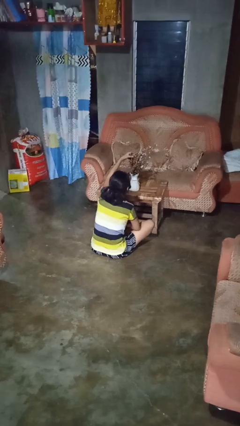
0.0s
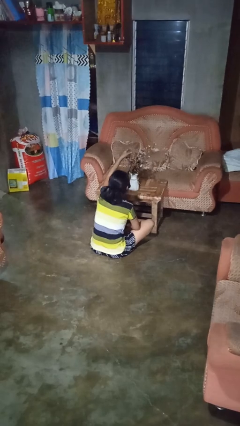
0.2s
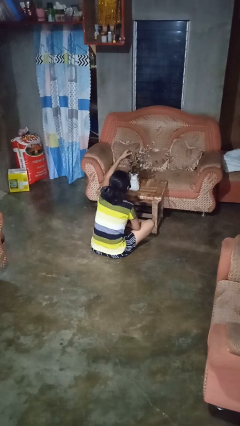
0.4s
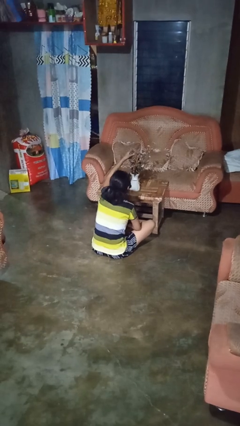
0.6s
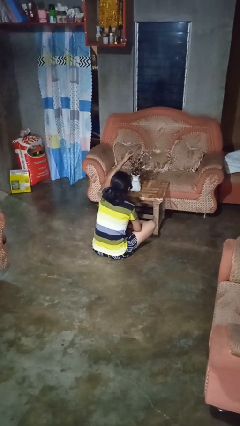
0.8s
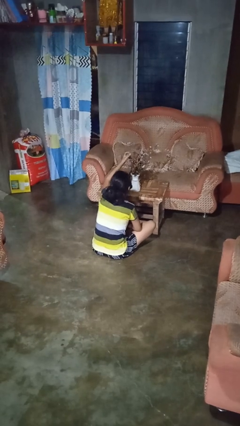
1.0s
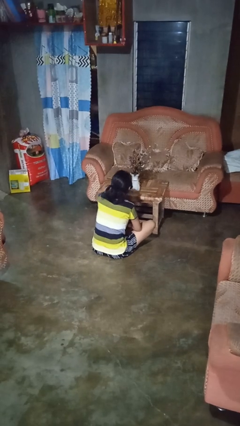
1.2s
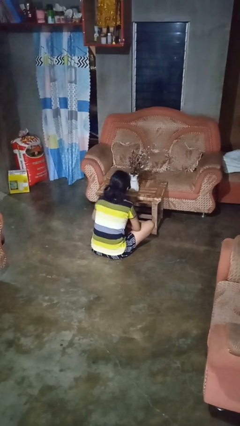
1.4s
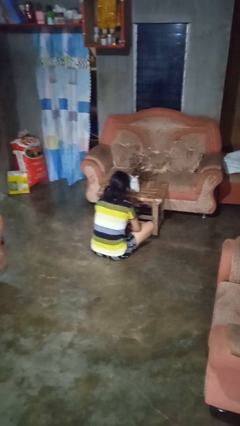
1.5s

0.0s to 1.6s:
person arranges flowers in vase

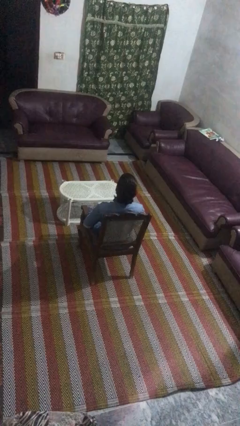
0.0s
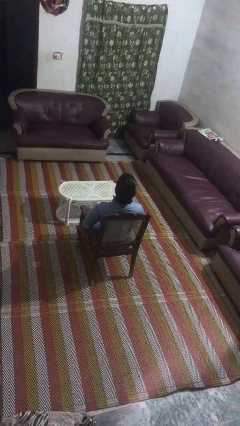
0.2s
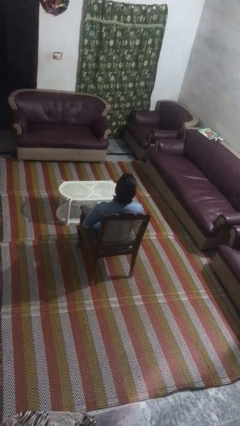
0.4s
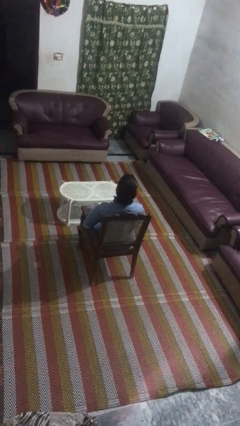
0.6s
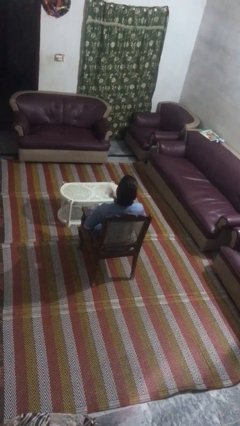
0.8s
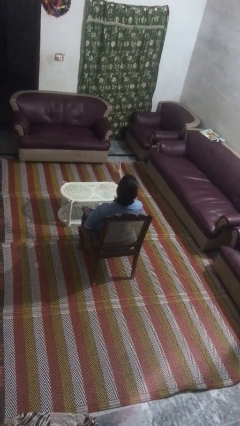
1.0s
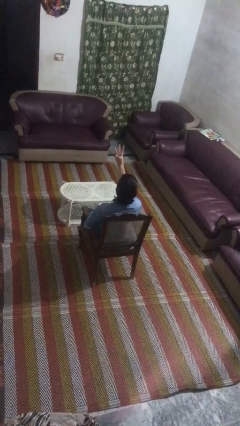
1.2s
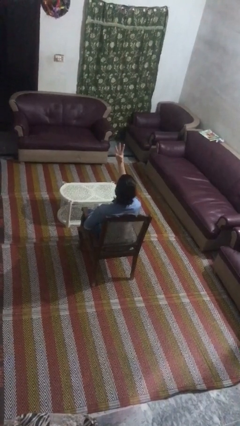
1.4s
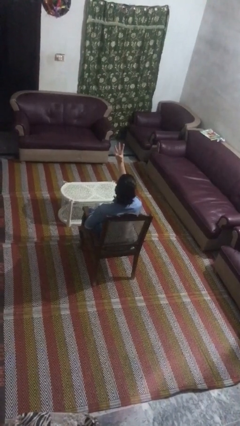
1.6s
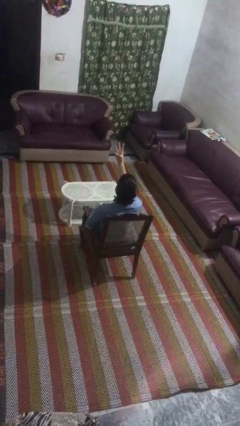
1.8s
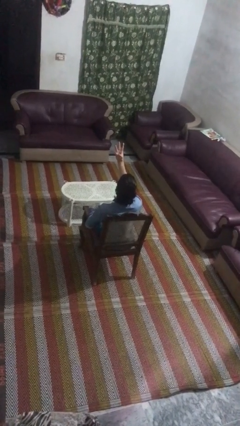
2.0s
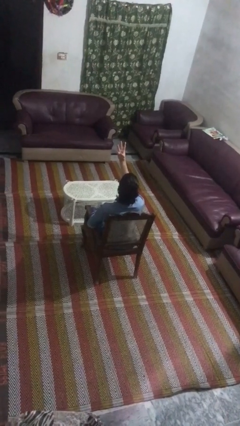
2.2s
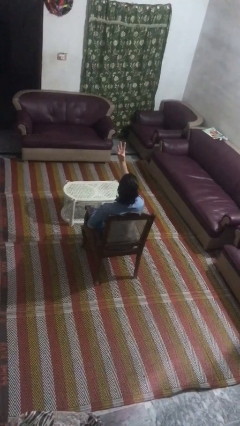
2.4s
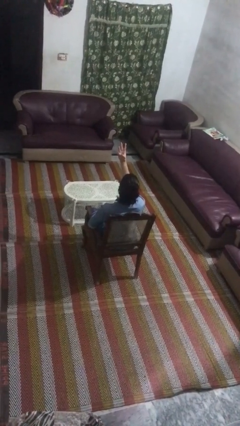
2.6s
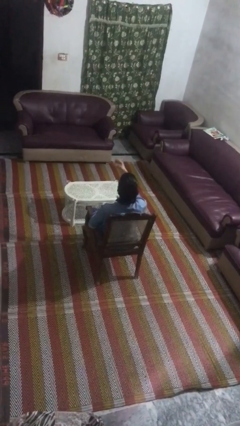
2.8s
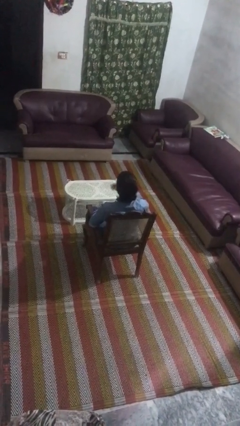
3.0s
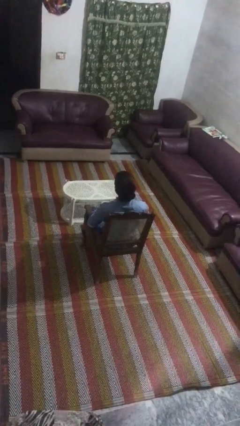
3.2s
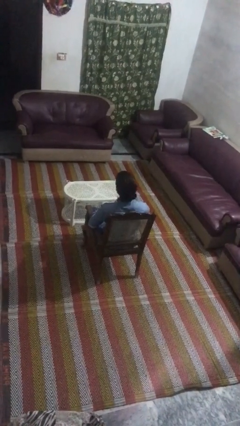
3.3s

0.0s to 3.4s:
person gestures number three

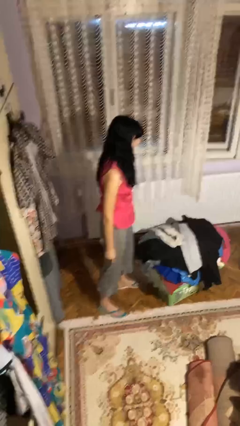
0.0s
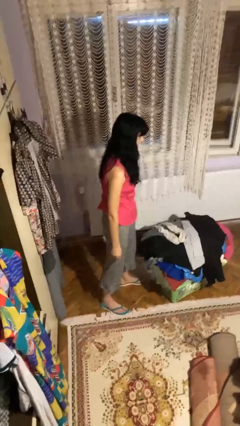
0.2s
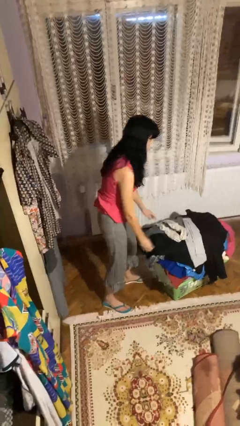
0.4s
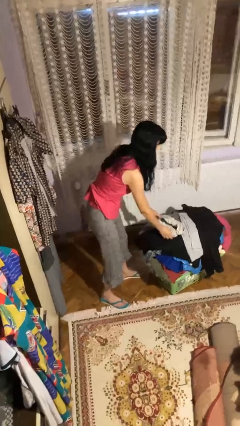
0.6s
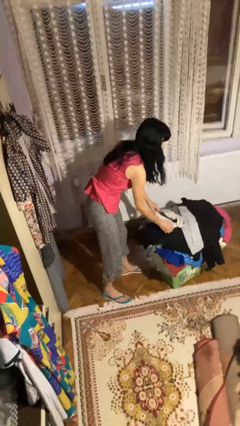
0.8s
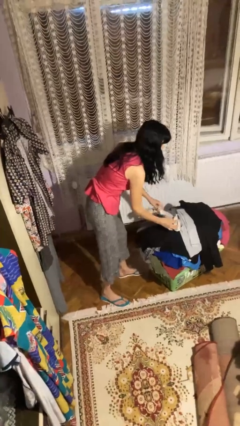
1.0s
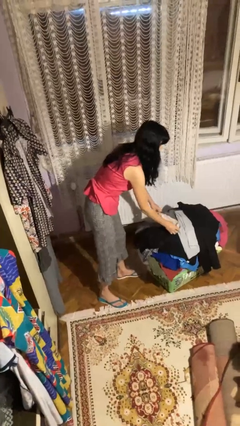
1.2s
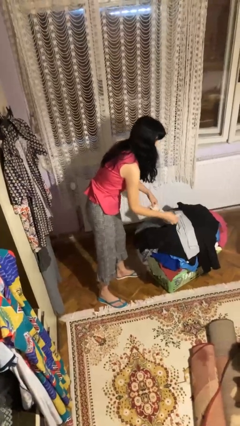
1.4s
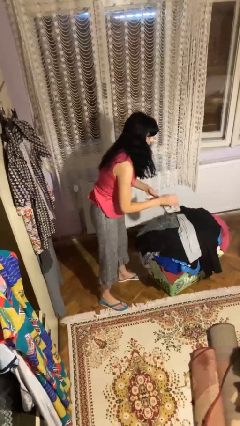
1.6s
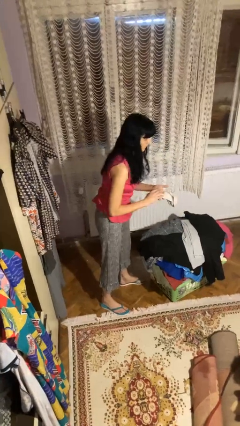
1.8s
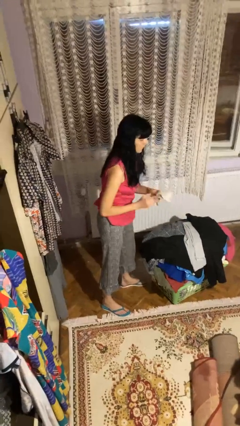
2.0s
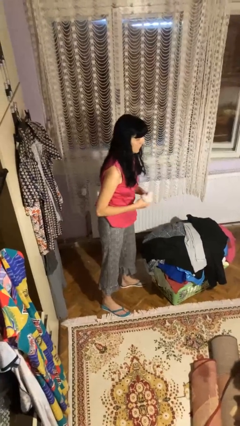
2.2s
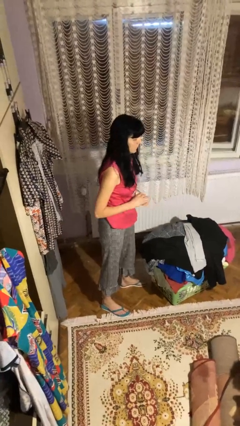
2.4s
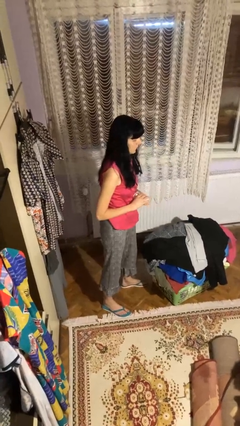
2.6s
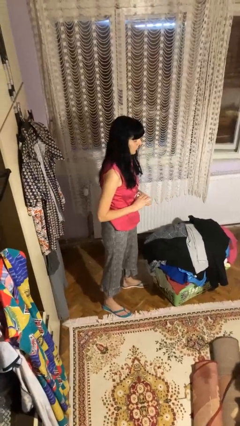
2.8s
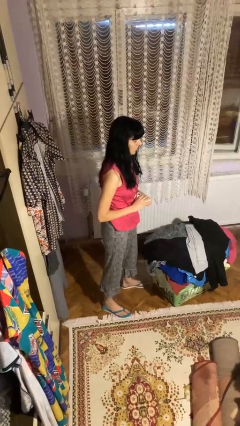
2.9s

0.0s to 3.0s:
person folds socks

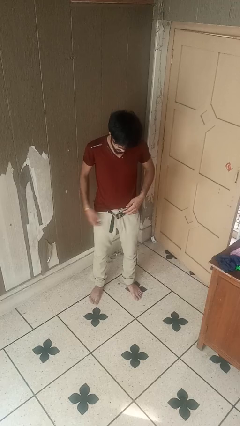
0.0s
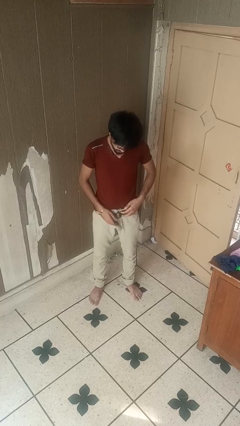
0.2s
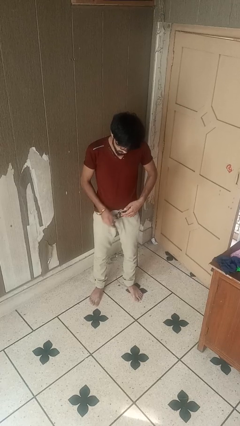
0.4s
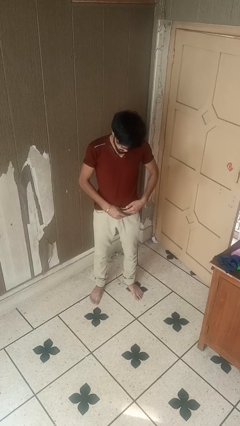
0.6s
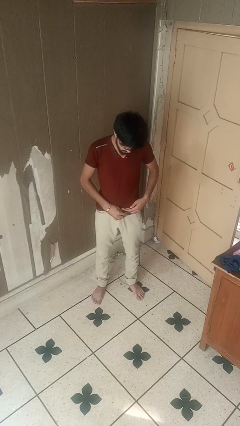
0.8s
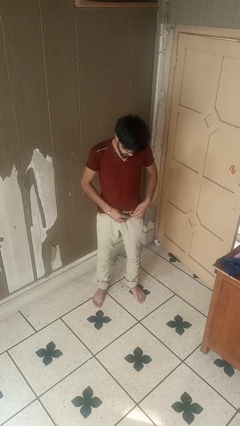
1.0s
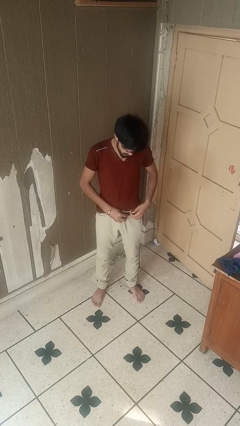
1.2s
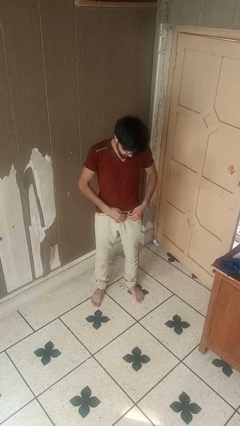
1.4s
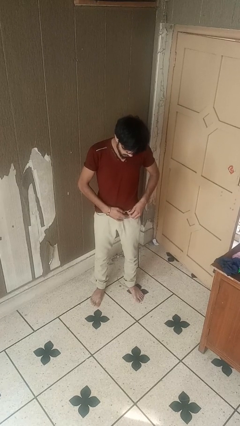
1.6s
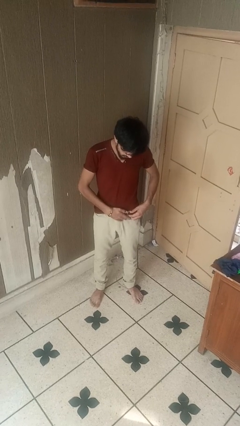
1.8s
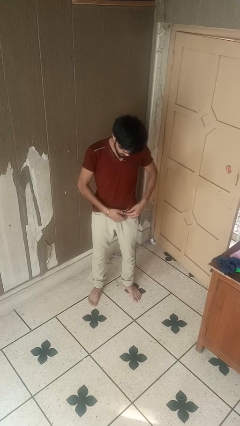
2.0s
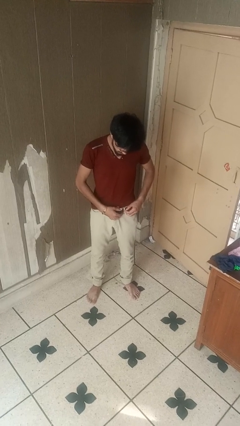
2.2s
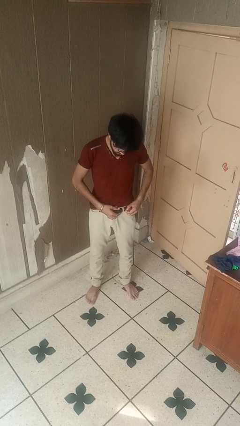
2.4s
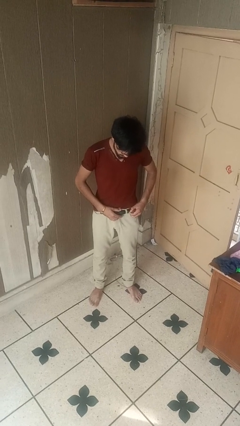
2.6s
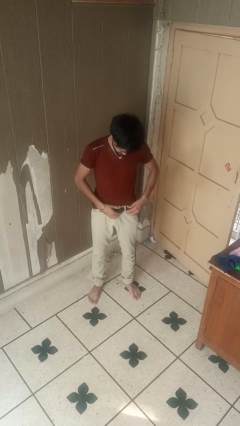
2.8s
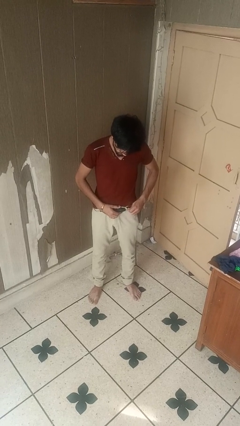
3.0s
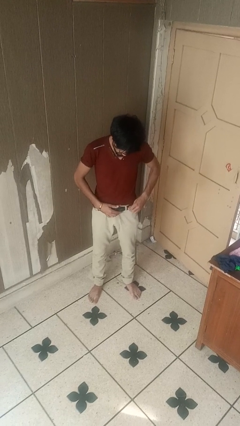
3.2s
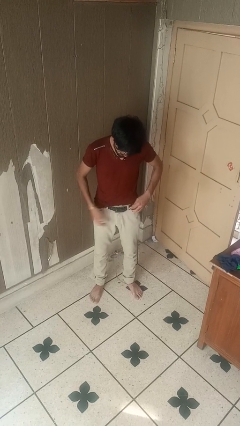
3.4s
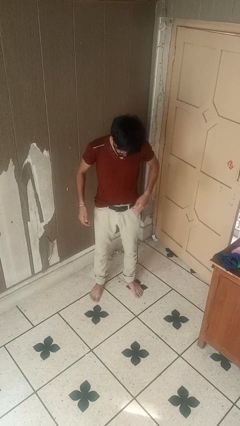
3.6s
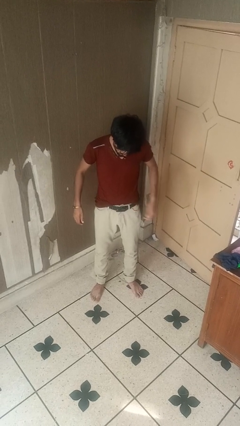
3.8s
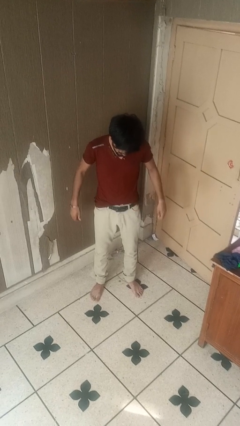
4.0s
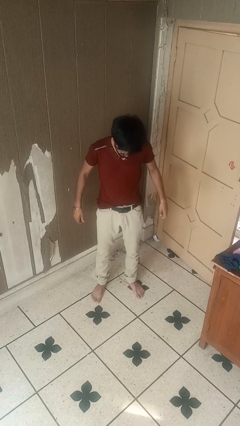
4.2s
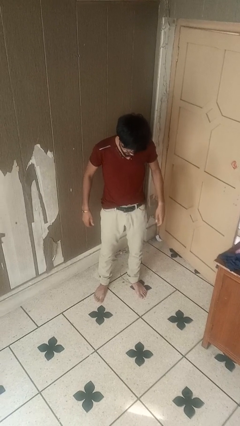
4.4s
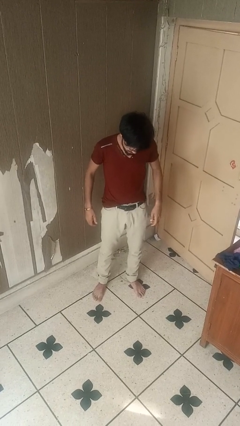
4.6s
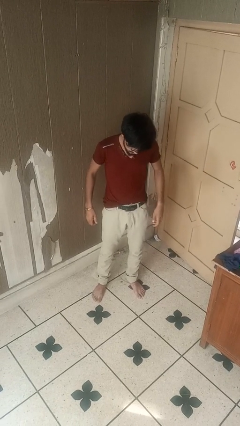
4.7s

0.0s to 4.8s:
person puts on belt

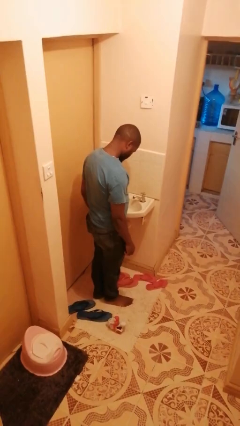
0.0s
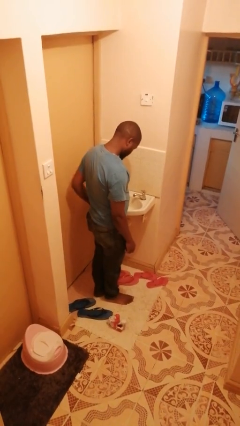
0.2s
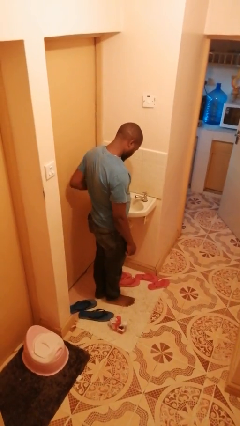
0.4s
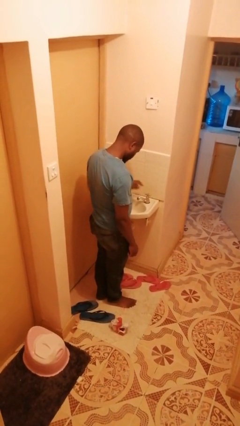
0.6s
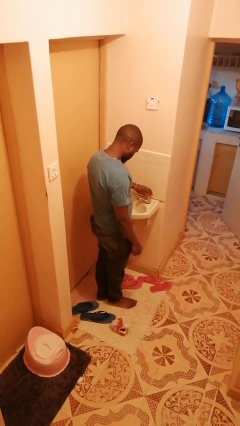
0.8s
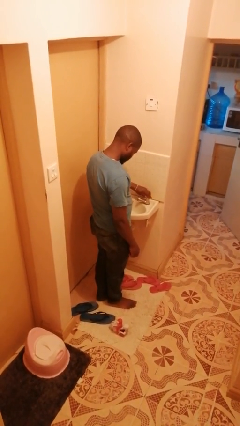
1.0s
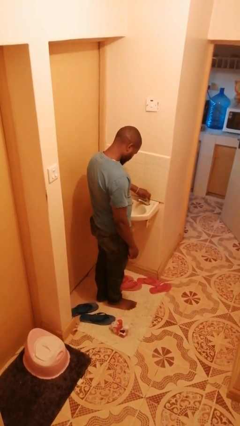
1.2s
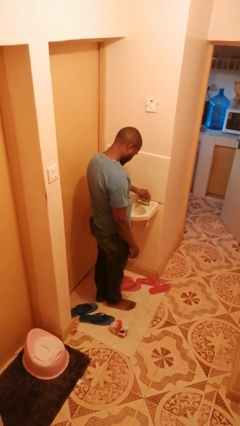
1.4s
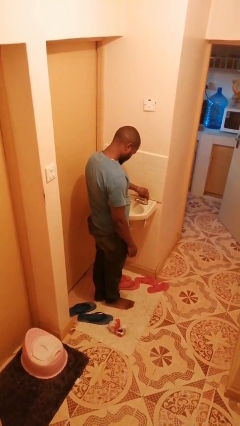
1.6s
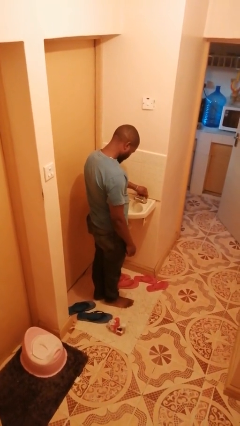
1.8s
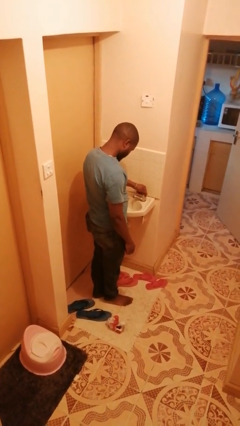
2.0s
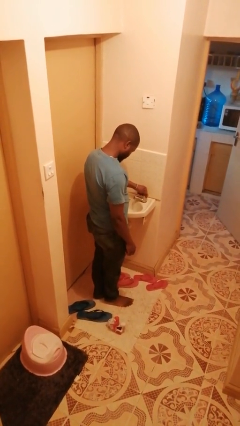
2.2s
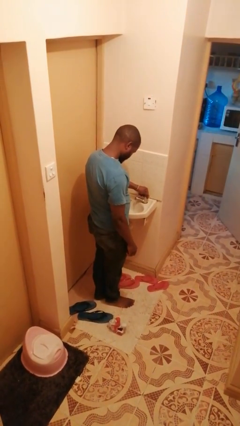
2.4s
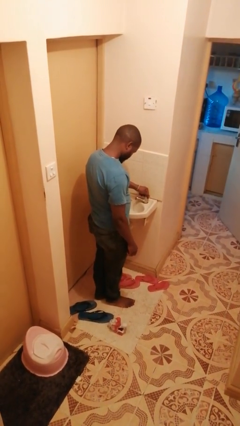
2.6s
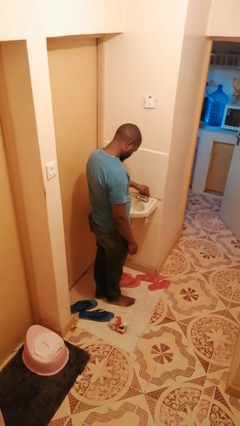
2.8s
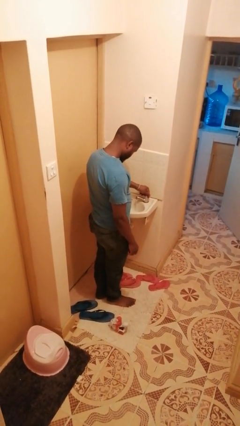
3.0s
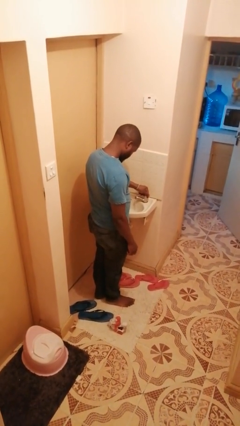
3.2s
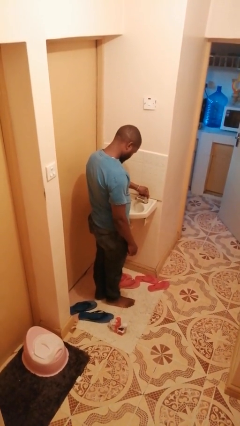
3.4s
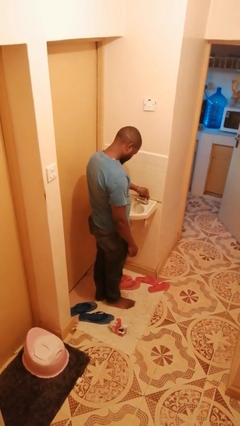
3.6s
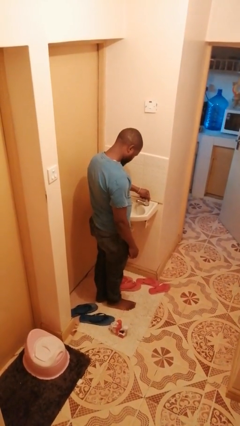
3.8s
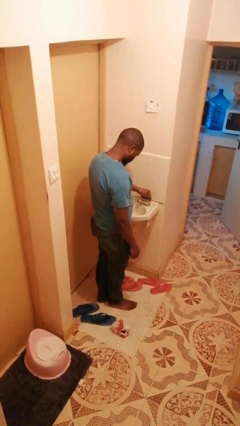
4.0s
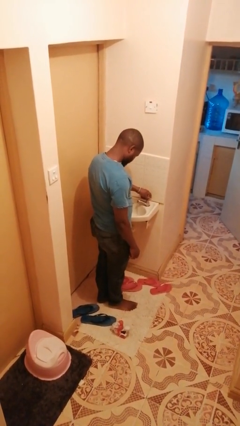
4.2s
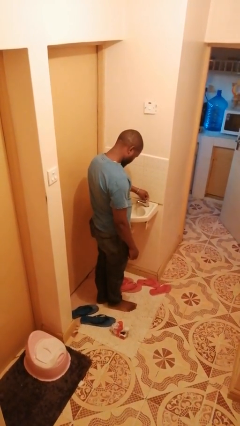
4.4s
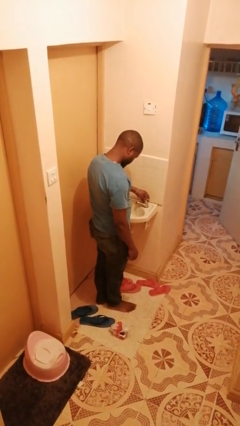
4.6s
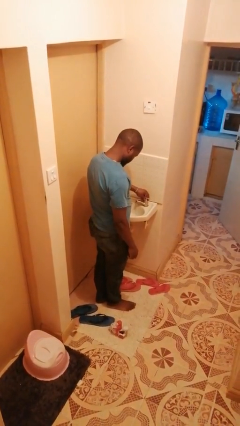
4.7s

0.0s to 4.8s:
person turns on faucet
